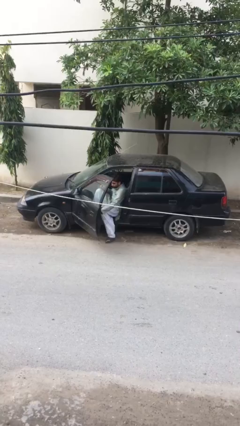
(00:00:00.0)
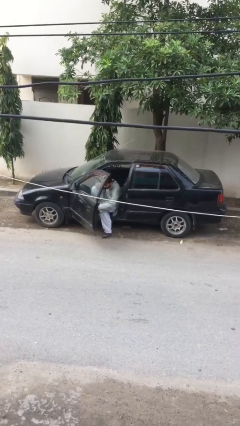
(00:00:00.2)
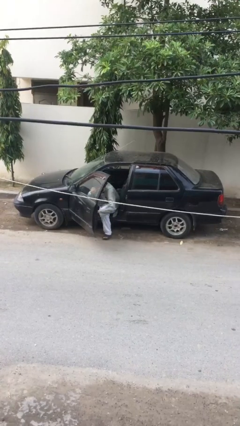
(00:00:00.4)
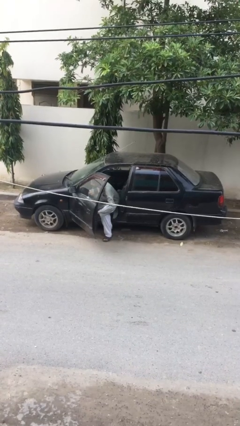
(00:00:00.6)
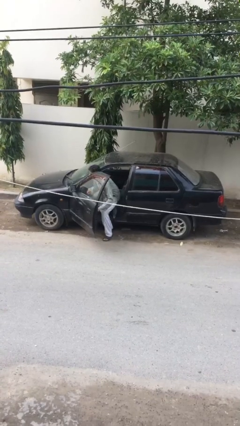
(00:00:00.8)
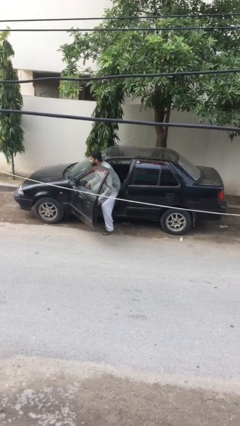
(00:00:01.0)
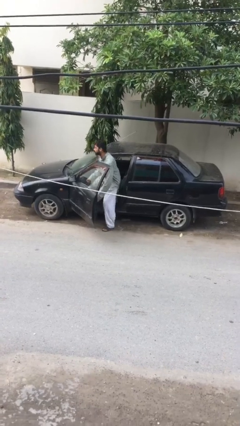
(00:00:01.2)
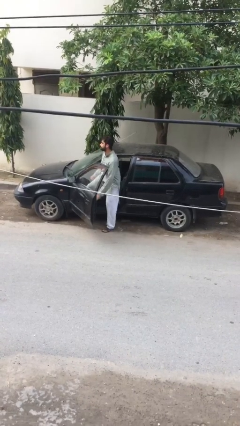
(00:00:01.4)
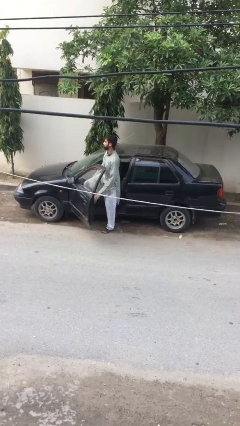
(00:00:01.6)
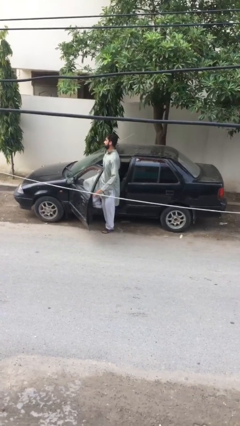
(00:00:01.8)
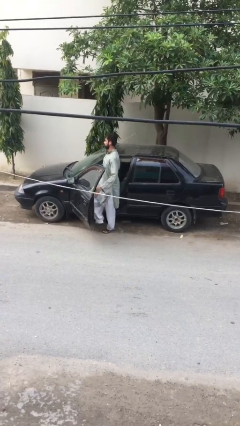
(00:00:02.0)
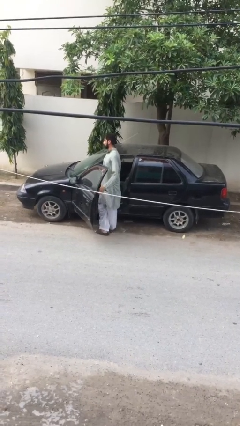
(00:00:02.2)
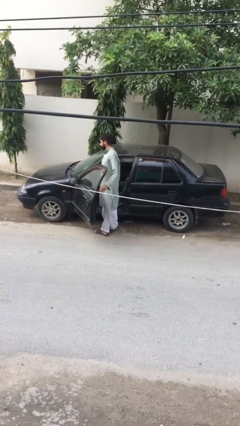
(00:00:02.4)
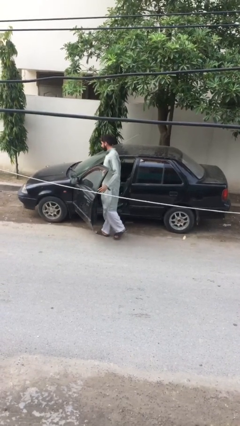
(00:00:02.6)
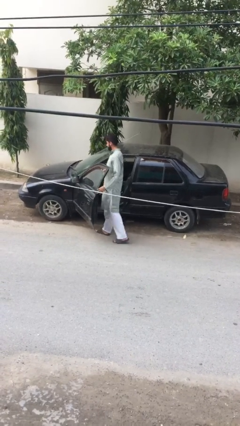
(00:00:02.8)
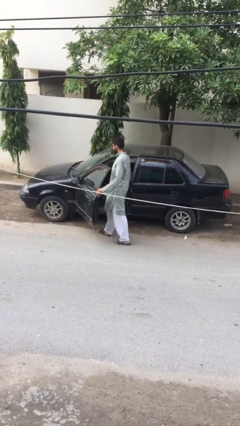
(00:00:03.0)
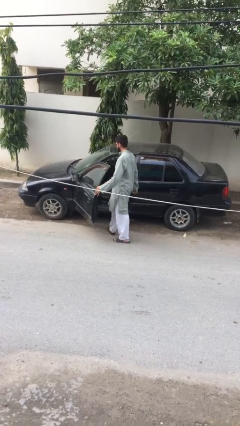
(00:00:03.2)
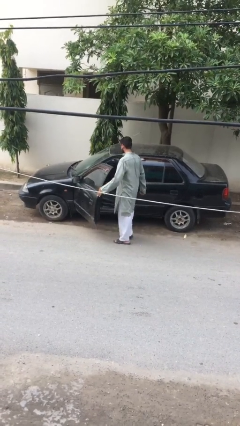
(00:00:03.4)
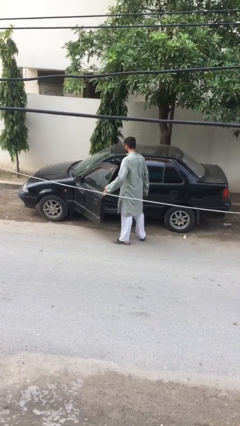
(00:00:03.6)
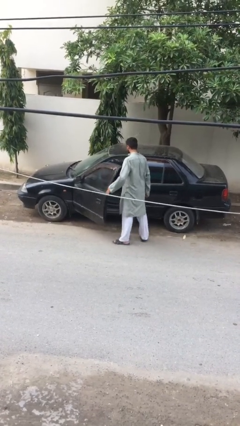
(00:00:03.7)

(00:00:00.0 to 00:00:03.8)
person exits car

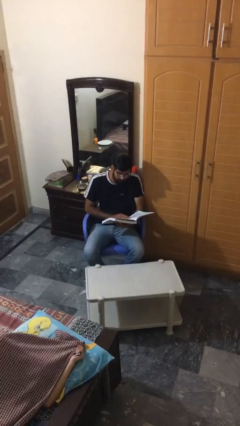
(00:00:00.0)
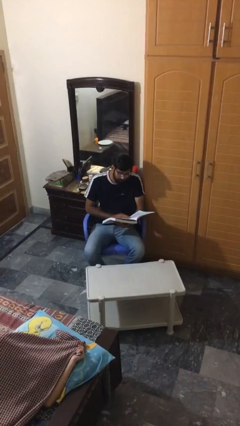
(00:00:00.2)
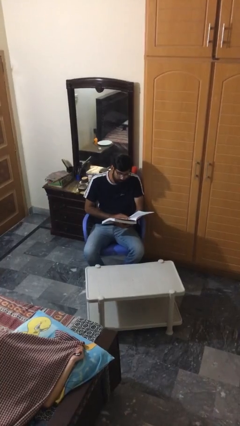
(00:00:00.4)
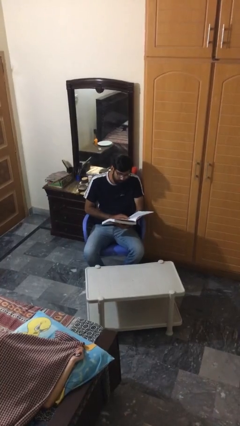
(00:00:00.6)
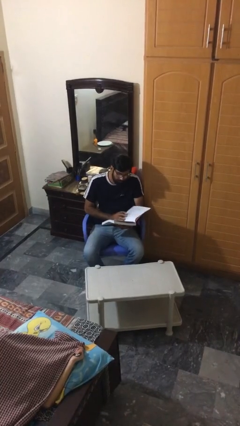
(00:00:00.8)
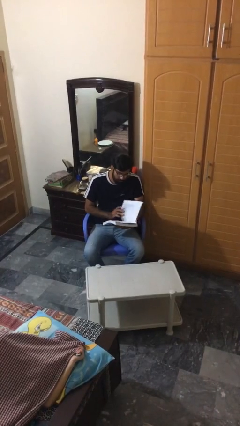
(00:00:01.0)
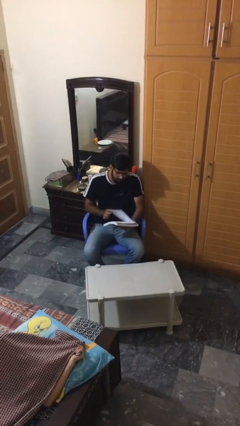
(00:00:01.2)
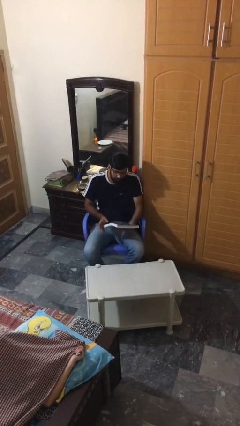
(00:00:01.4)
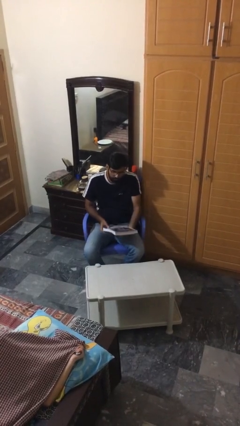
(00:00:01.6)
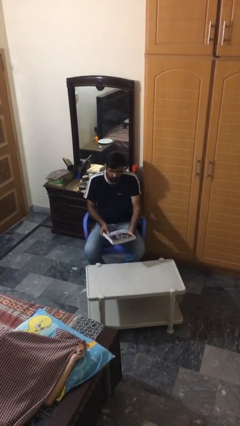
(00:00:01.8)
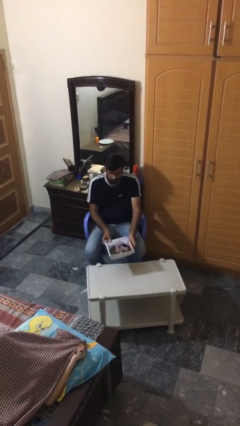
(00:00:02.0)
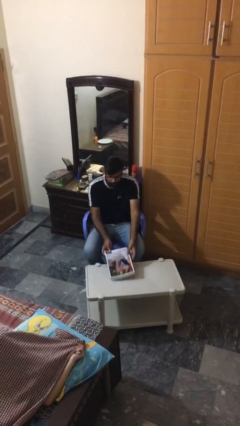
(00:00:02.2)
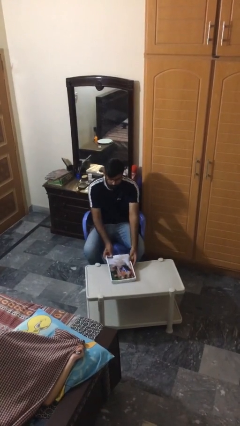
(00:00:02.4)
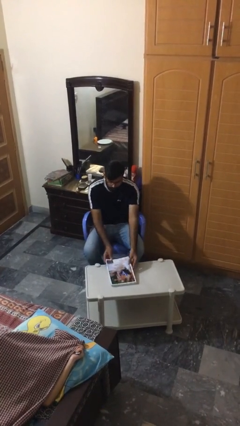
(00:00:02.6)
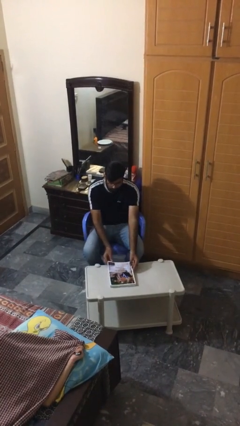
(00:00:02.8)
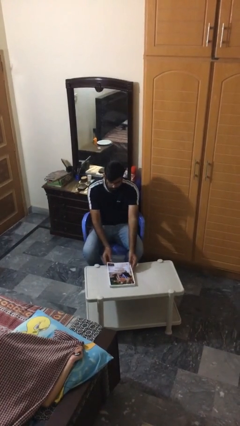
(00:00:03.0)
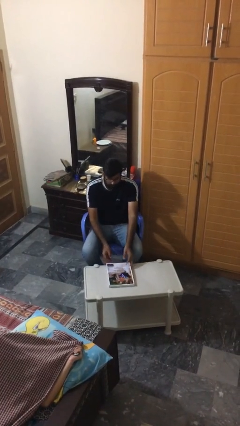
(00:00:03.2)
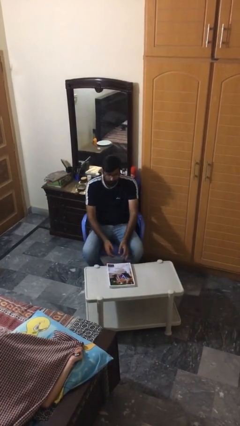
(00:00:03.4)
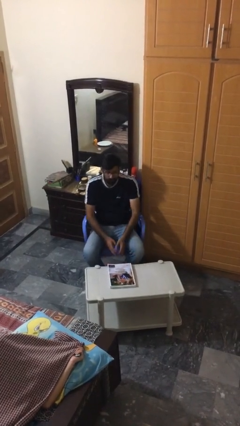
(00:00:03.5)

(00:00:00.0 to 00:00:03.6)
person puts down object on table

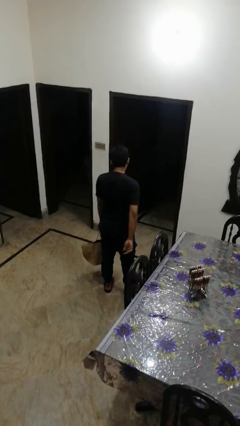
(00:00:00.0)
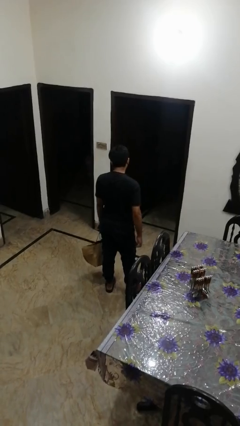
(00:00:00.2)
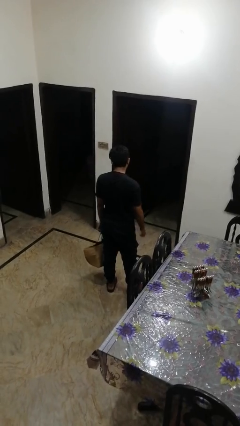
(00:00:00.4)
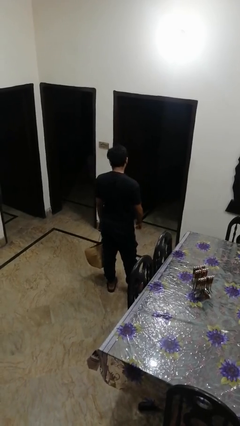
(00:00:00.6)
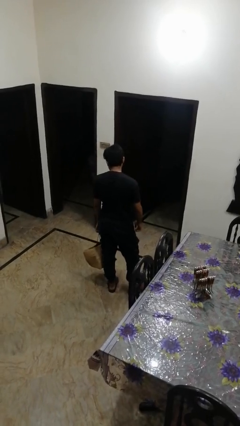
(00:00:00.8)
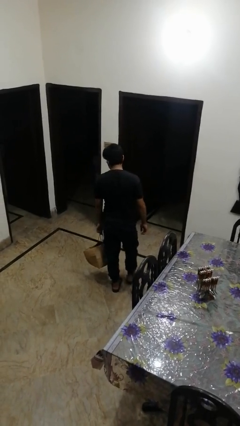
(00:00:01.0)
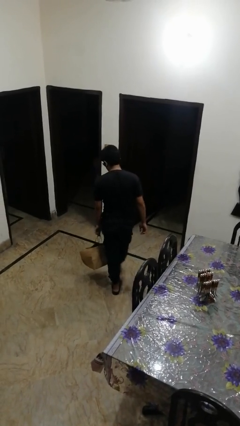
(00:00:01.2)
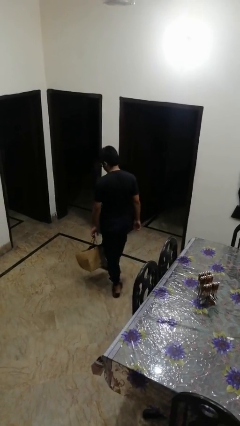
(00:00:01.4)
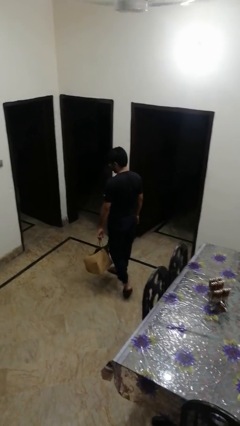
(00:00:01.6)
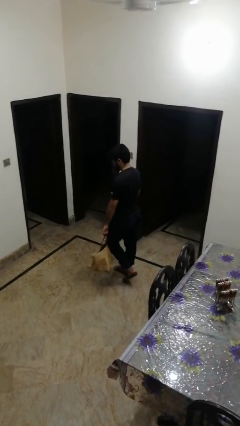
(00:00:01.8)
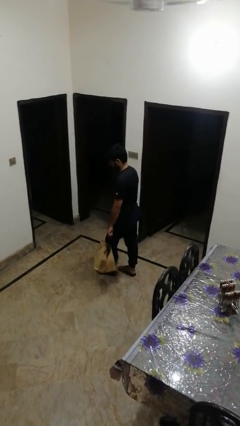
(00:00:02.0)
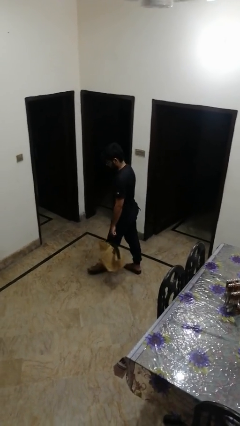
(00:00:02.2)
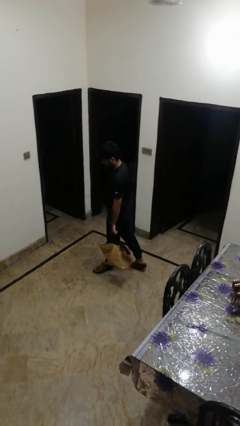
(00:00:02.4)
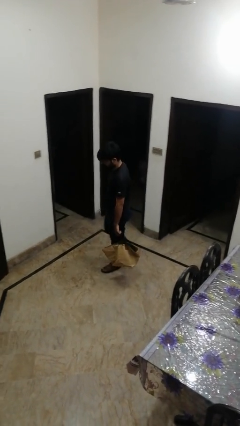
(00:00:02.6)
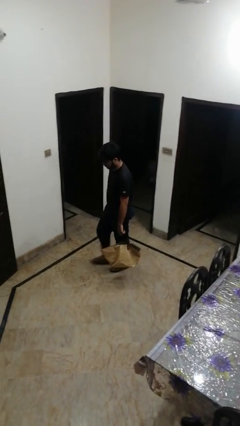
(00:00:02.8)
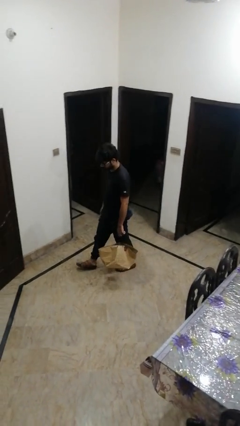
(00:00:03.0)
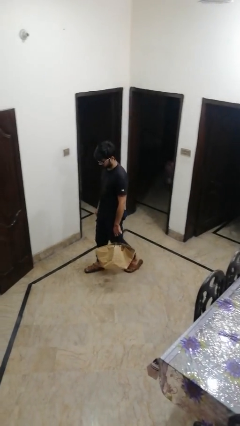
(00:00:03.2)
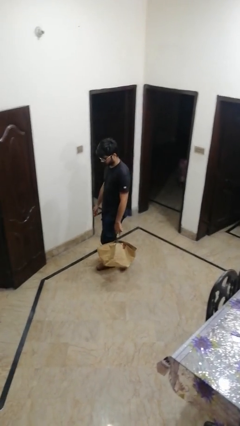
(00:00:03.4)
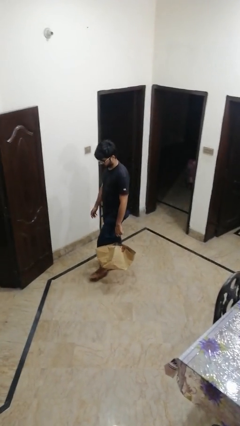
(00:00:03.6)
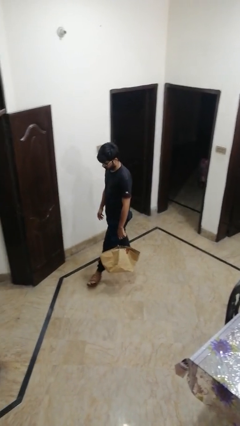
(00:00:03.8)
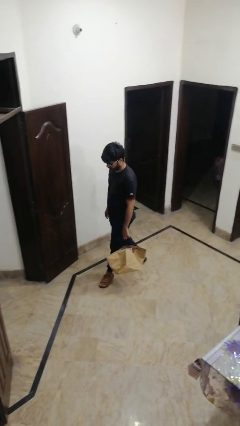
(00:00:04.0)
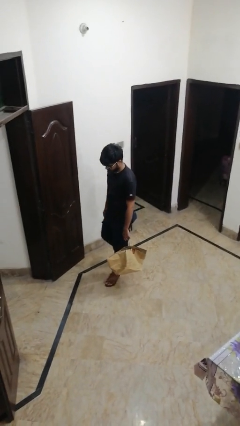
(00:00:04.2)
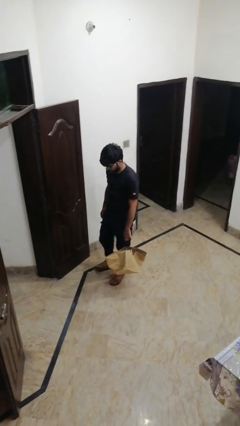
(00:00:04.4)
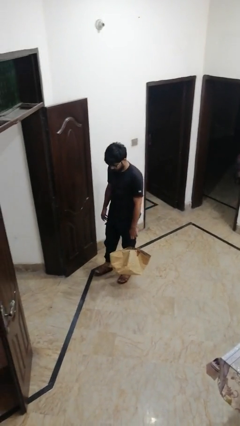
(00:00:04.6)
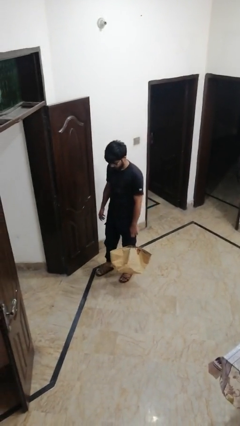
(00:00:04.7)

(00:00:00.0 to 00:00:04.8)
person carries groceries

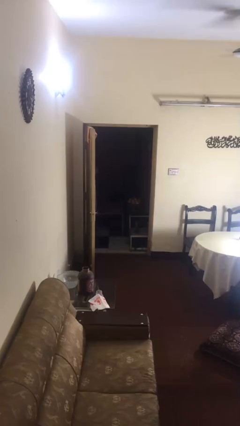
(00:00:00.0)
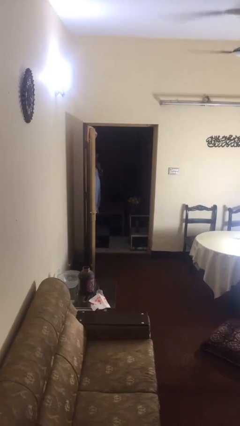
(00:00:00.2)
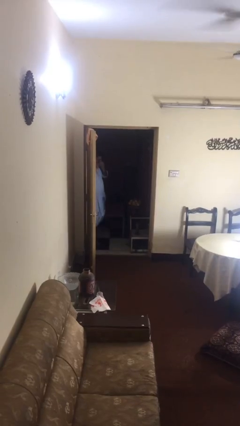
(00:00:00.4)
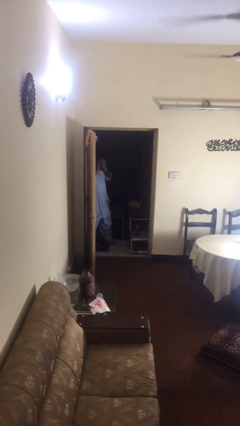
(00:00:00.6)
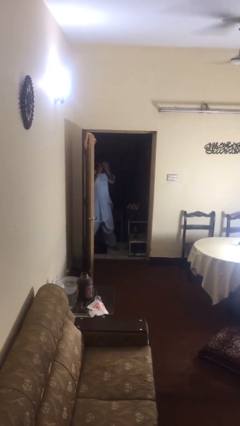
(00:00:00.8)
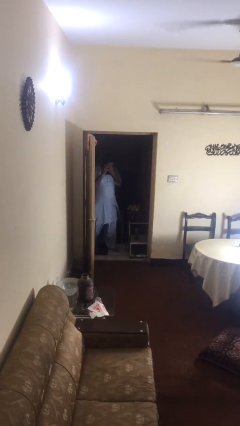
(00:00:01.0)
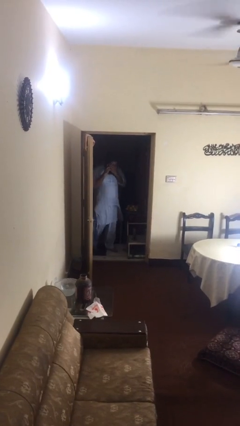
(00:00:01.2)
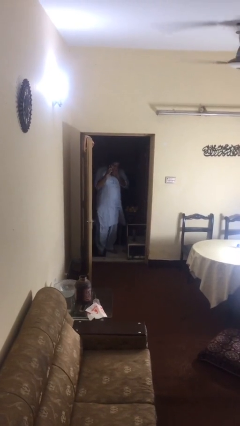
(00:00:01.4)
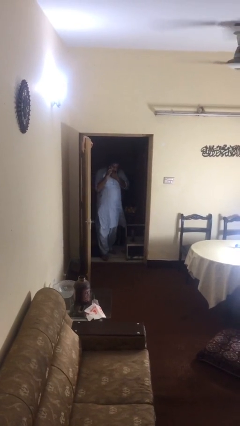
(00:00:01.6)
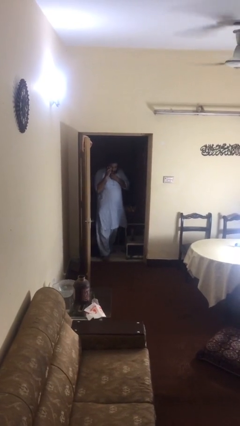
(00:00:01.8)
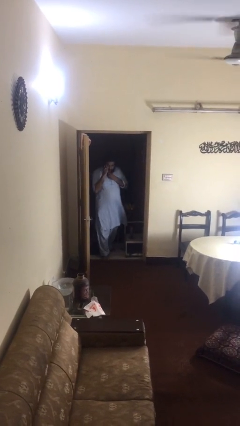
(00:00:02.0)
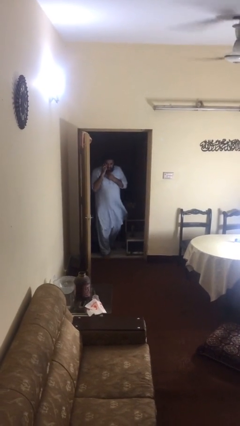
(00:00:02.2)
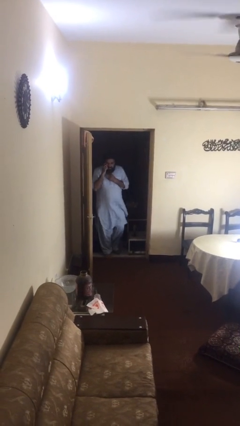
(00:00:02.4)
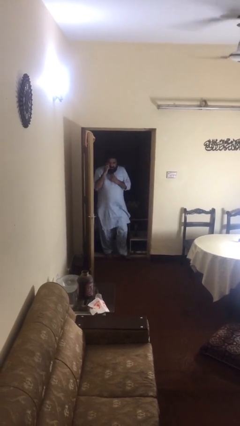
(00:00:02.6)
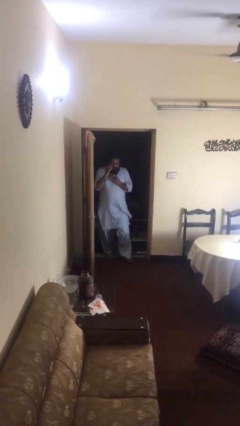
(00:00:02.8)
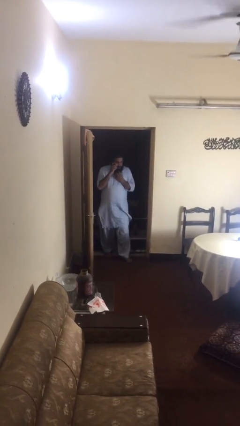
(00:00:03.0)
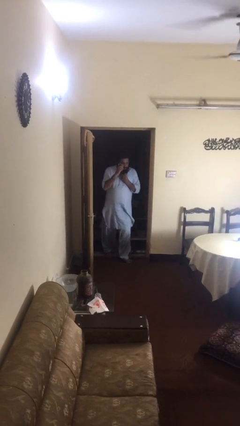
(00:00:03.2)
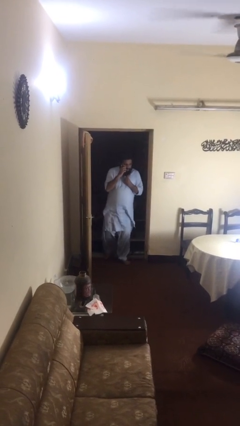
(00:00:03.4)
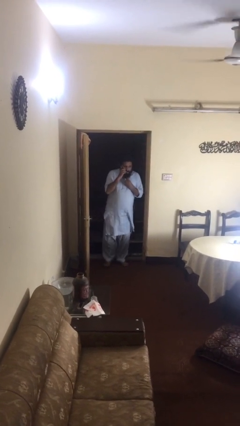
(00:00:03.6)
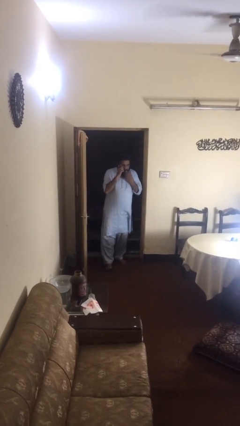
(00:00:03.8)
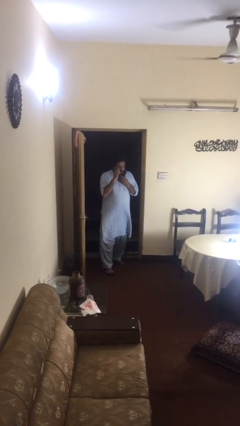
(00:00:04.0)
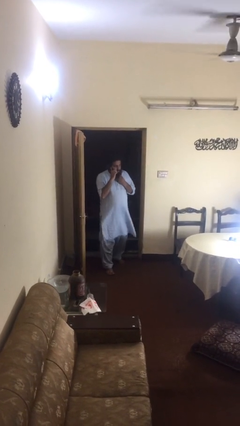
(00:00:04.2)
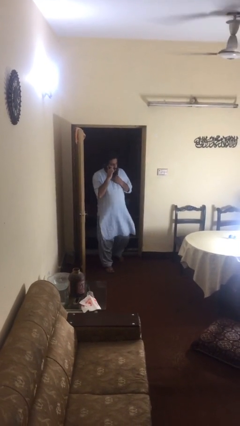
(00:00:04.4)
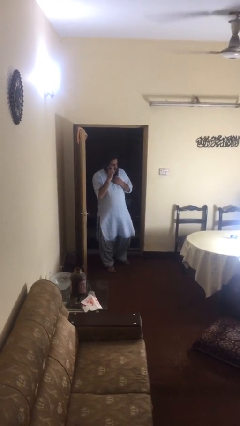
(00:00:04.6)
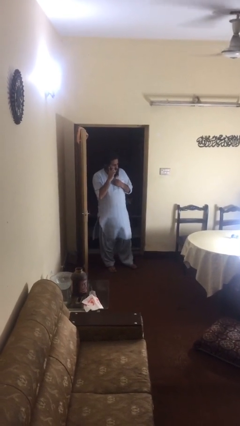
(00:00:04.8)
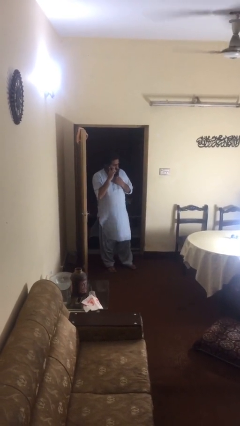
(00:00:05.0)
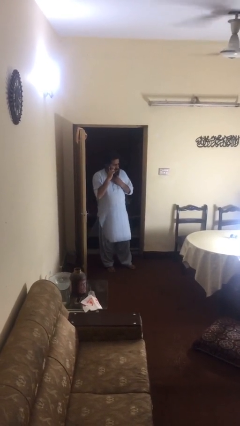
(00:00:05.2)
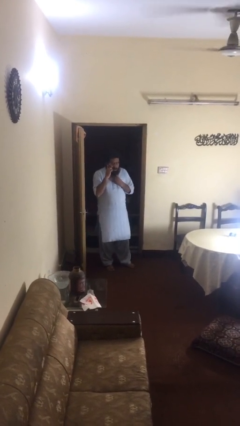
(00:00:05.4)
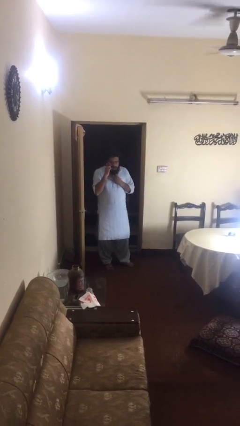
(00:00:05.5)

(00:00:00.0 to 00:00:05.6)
person enters scene through structure
